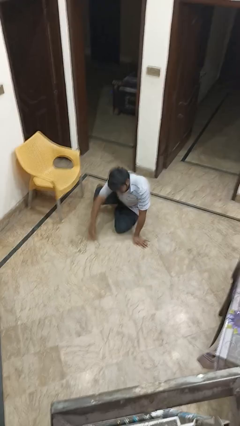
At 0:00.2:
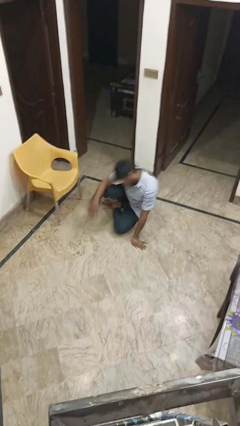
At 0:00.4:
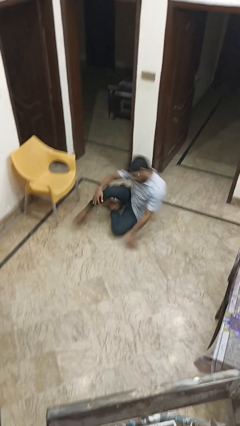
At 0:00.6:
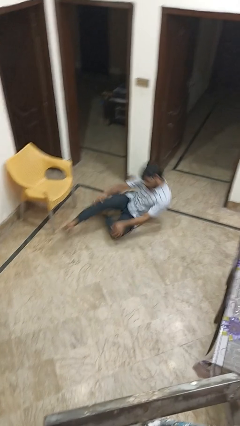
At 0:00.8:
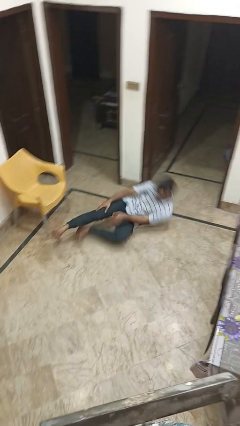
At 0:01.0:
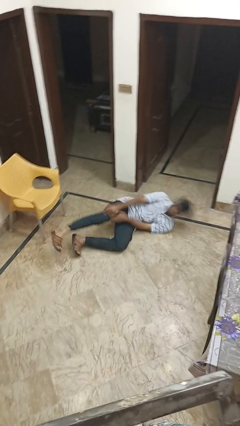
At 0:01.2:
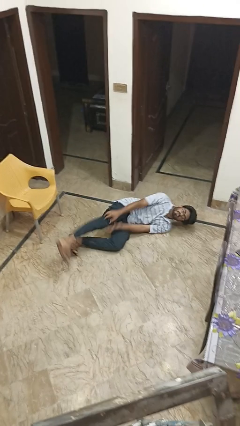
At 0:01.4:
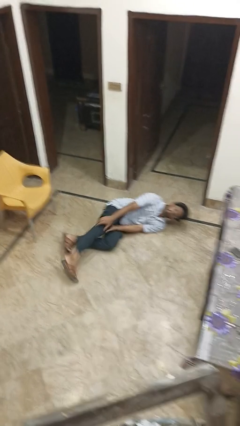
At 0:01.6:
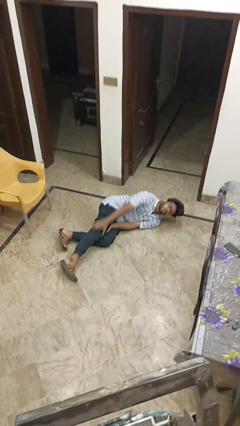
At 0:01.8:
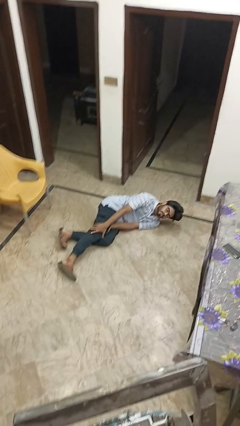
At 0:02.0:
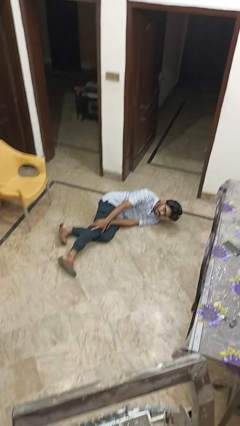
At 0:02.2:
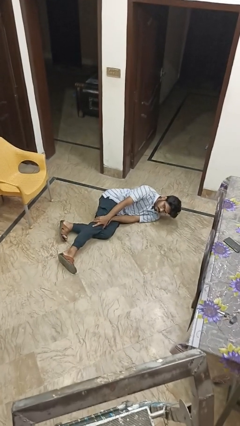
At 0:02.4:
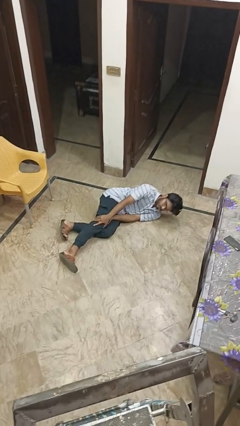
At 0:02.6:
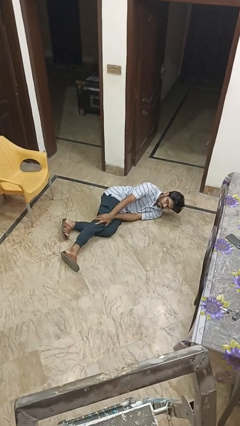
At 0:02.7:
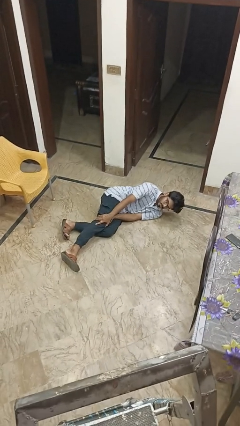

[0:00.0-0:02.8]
person lies down on floor

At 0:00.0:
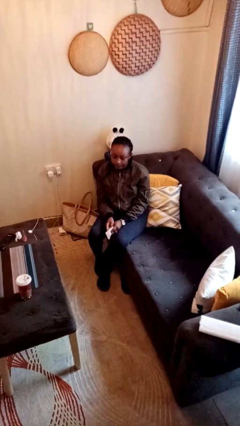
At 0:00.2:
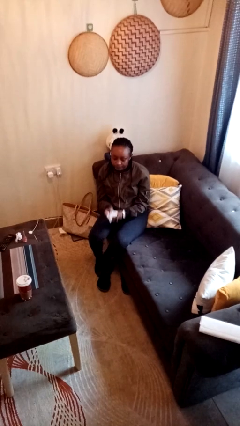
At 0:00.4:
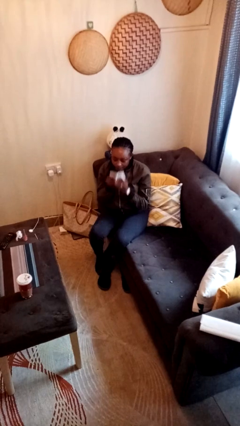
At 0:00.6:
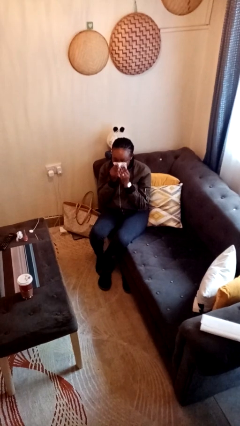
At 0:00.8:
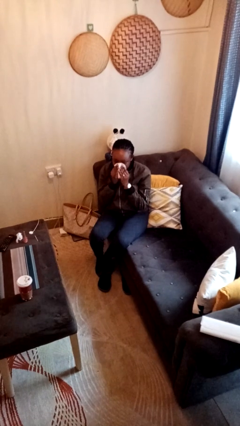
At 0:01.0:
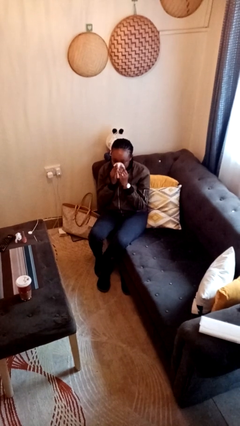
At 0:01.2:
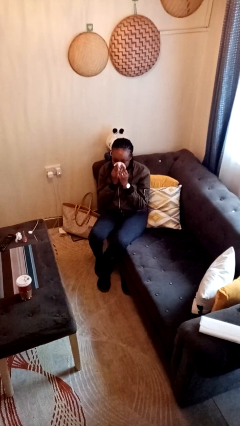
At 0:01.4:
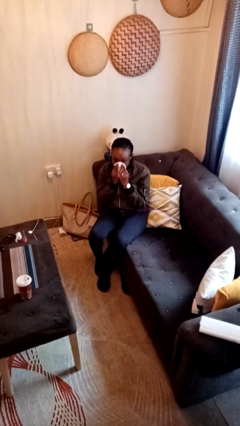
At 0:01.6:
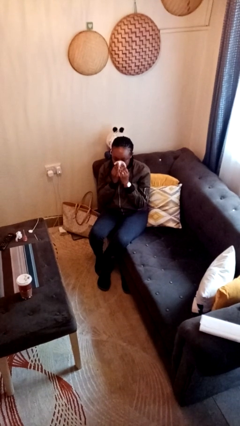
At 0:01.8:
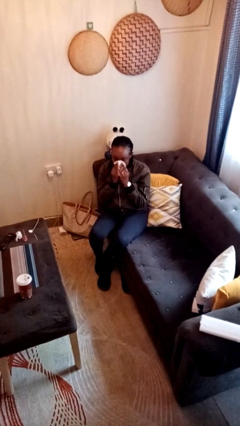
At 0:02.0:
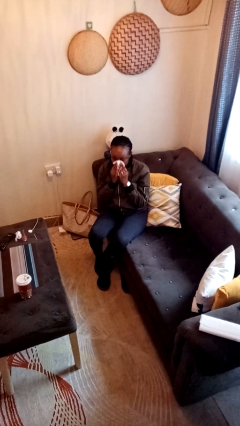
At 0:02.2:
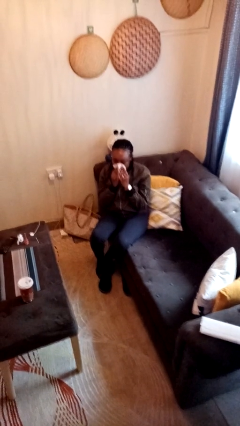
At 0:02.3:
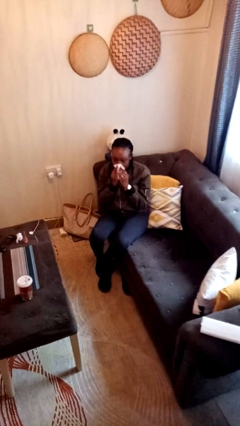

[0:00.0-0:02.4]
person blows nose

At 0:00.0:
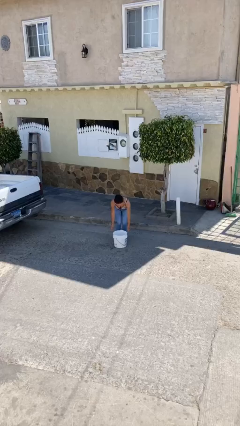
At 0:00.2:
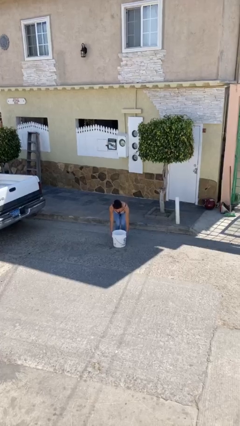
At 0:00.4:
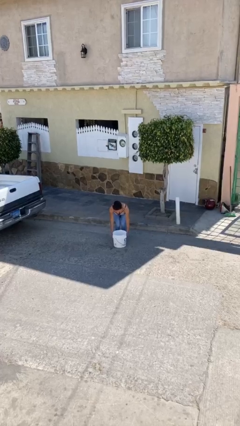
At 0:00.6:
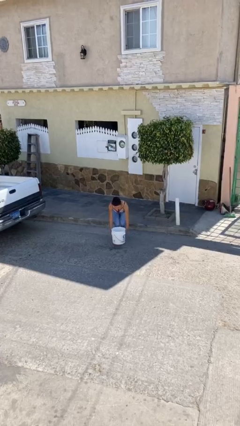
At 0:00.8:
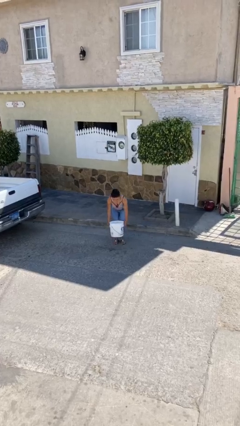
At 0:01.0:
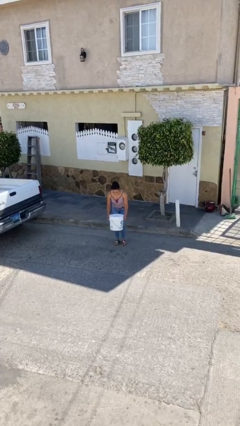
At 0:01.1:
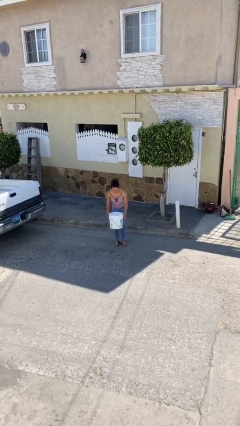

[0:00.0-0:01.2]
person picks up object from floor

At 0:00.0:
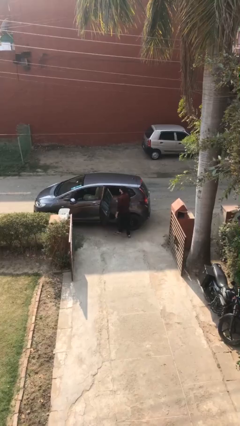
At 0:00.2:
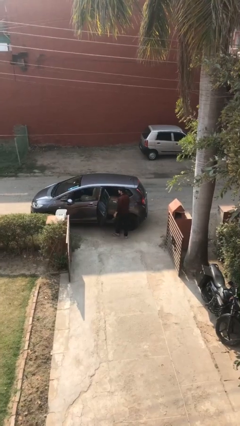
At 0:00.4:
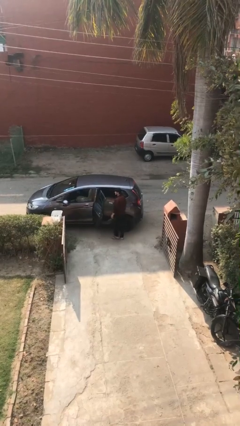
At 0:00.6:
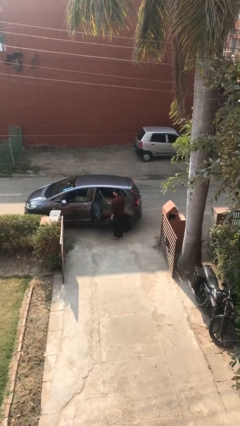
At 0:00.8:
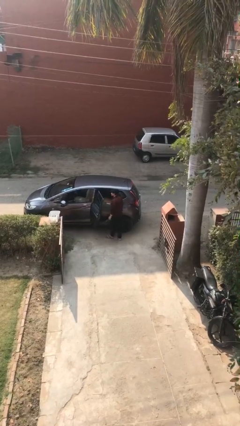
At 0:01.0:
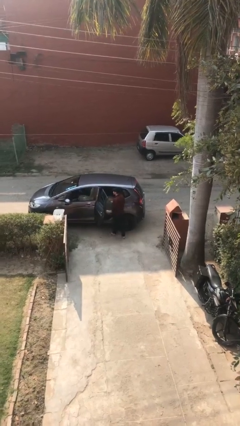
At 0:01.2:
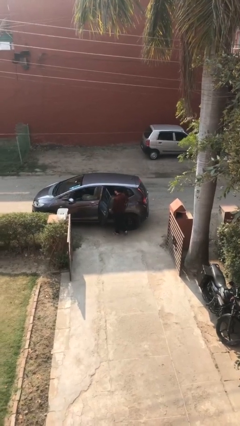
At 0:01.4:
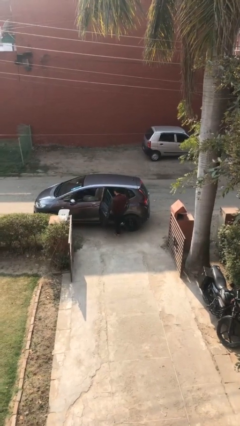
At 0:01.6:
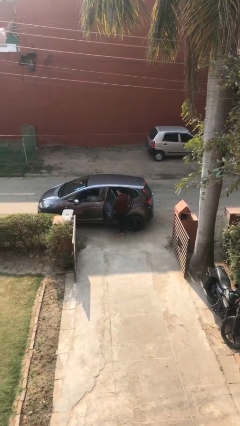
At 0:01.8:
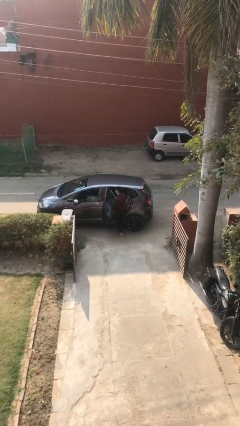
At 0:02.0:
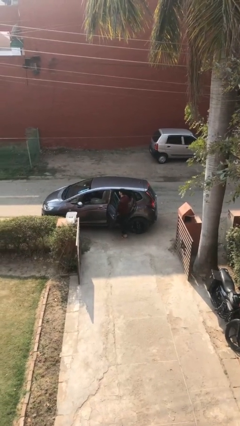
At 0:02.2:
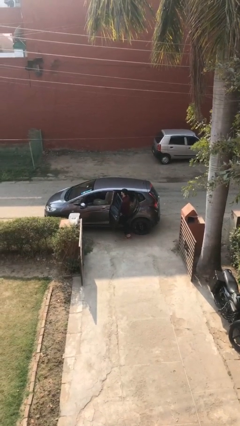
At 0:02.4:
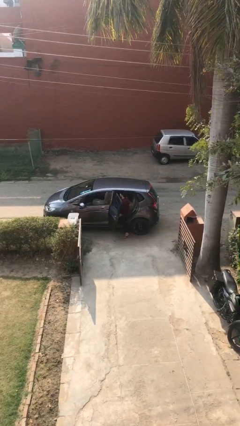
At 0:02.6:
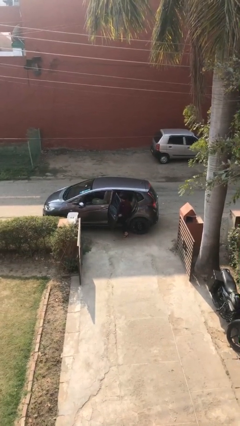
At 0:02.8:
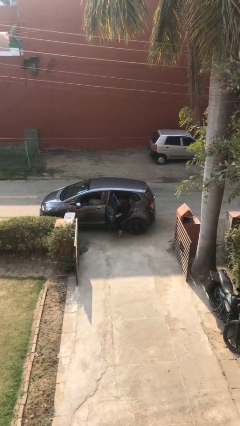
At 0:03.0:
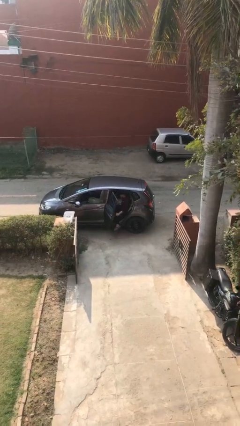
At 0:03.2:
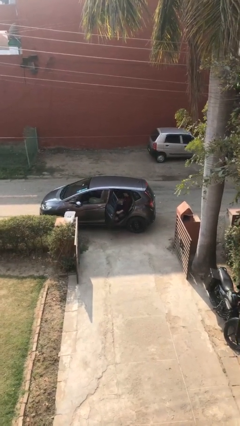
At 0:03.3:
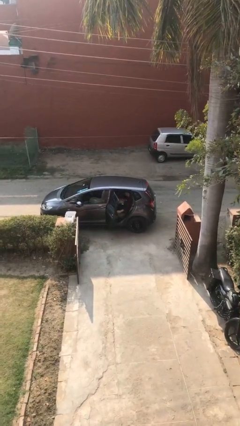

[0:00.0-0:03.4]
person enters car

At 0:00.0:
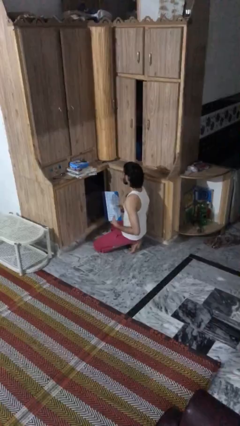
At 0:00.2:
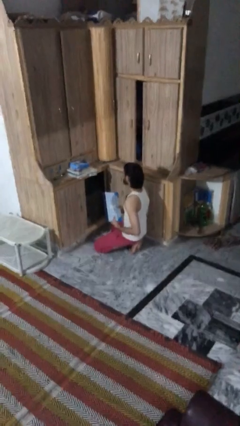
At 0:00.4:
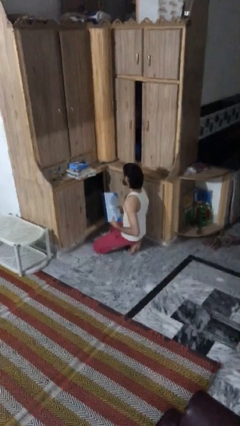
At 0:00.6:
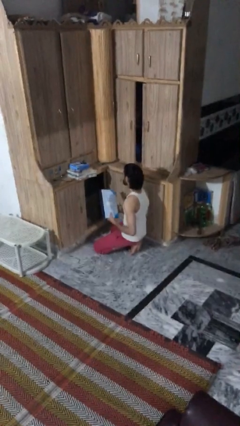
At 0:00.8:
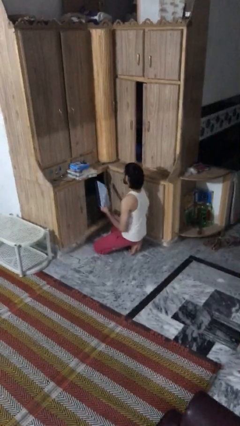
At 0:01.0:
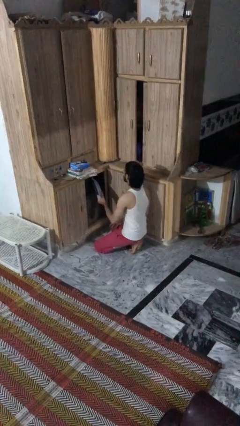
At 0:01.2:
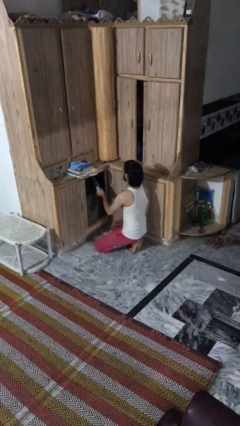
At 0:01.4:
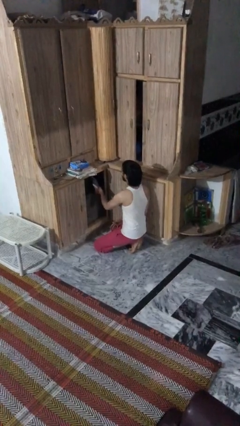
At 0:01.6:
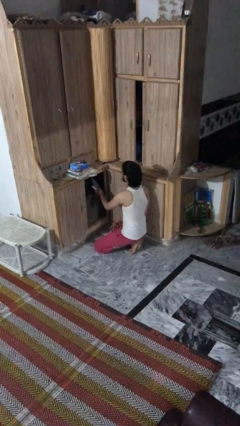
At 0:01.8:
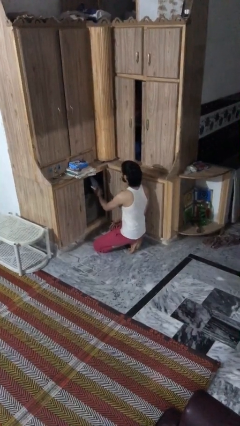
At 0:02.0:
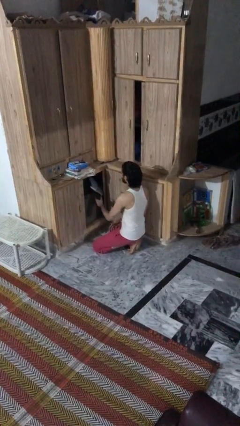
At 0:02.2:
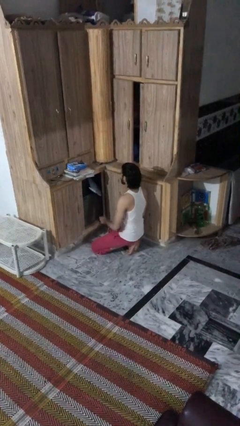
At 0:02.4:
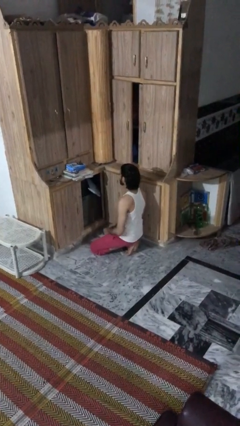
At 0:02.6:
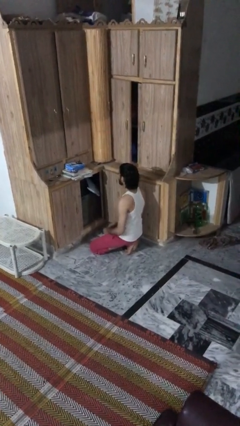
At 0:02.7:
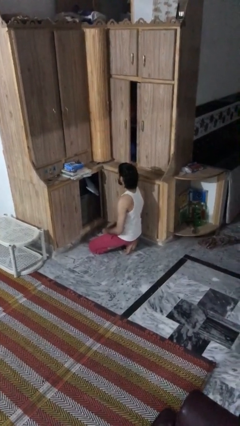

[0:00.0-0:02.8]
person puts down object into cabinet

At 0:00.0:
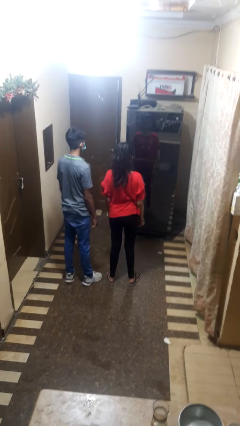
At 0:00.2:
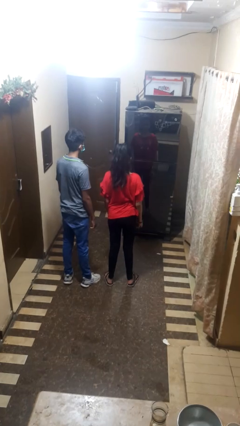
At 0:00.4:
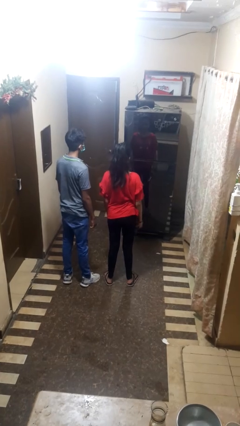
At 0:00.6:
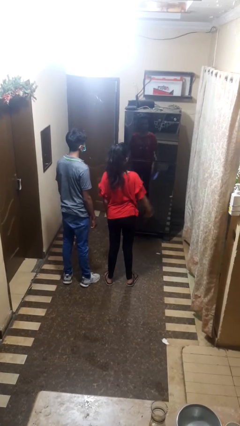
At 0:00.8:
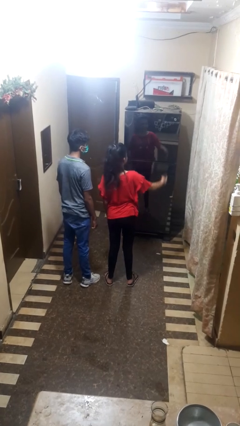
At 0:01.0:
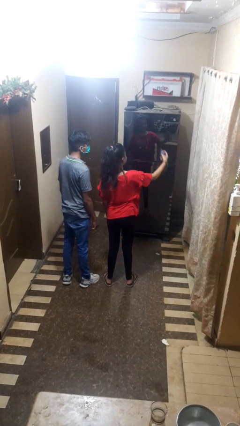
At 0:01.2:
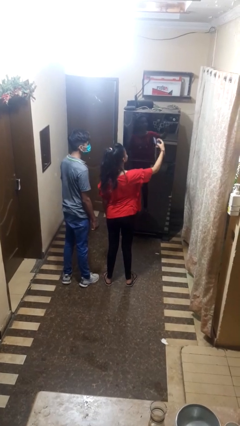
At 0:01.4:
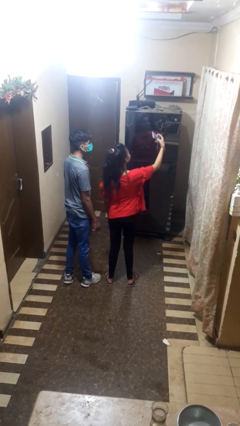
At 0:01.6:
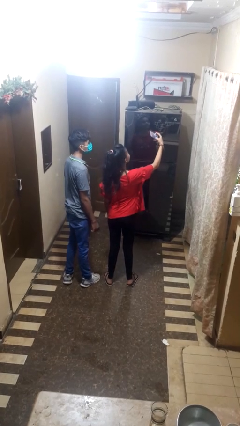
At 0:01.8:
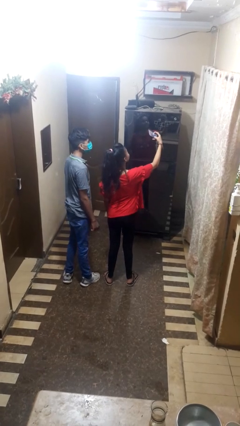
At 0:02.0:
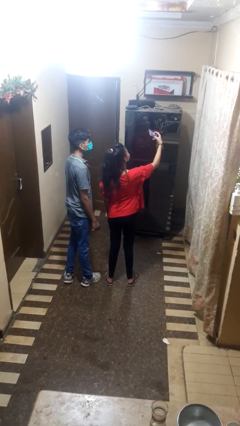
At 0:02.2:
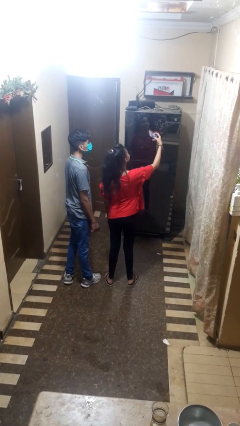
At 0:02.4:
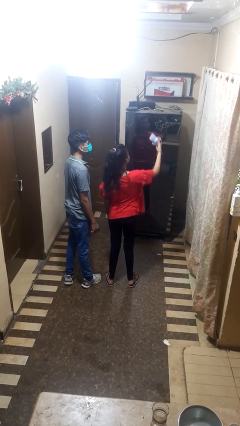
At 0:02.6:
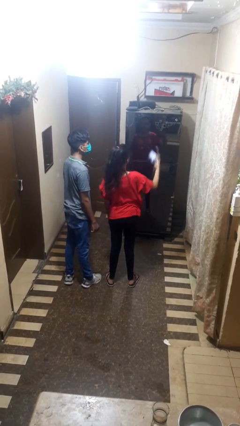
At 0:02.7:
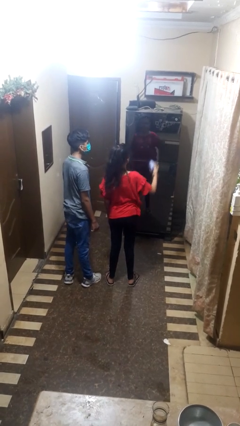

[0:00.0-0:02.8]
person takes selfie with person

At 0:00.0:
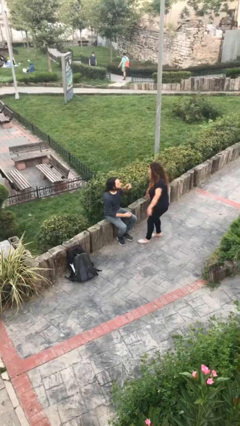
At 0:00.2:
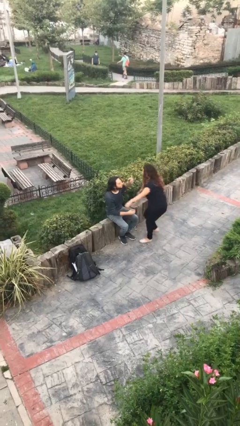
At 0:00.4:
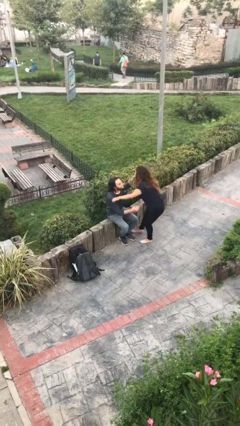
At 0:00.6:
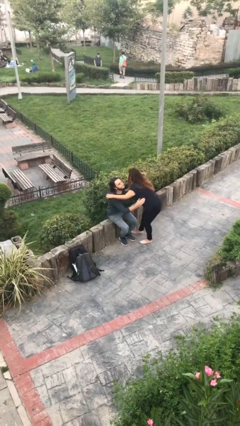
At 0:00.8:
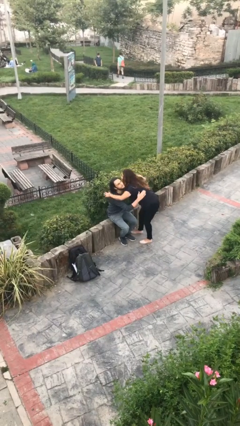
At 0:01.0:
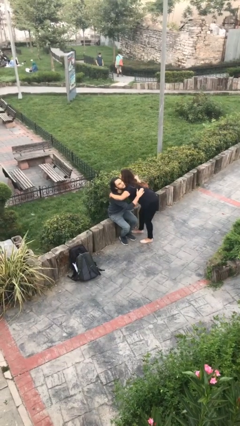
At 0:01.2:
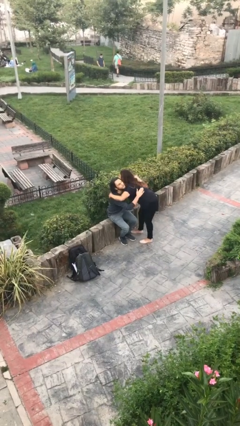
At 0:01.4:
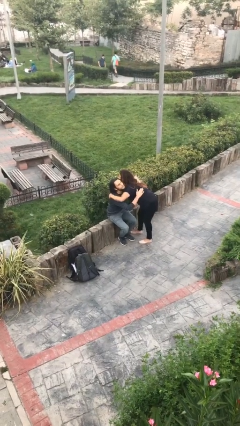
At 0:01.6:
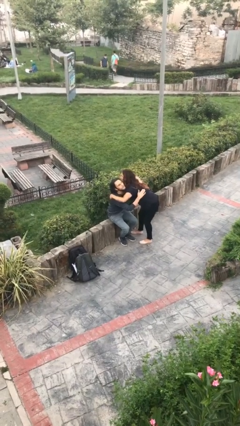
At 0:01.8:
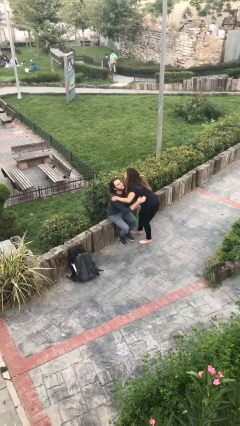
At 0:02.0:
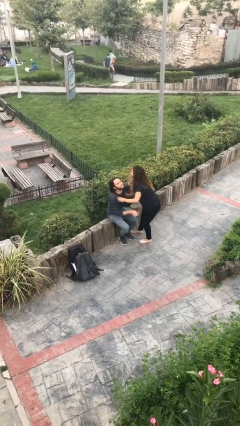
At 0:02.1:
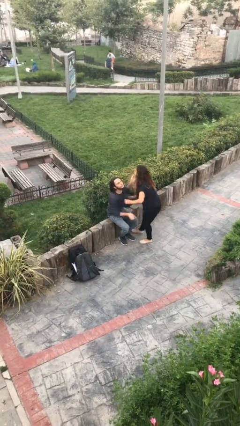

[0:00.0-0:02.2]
person embraces person
